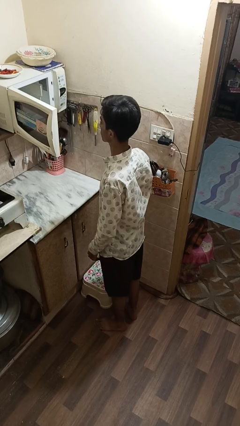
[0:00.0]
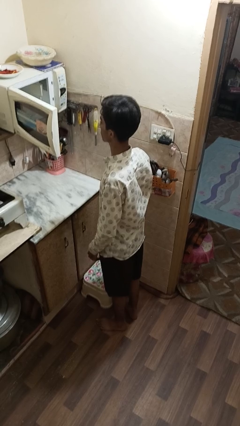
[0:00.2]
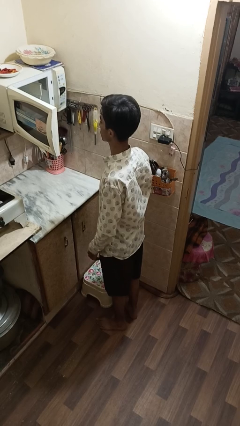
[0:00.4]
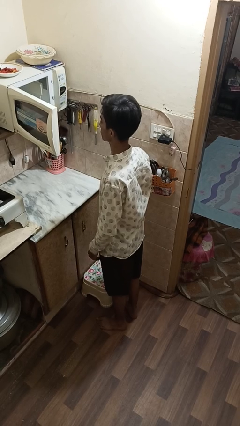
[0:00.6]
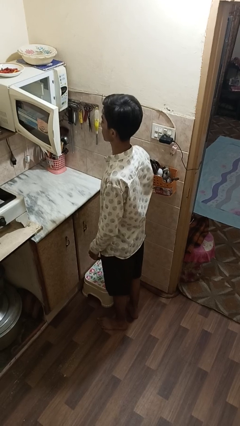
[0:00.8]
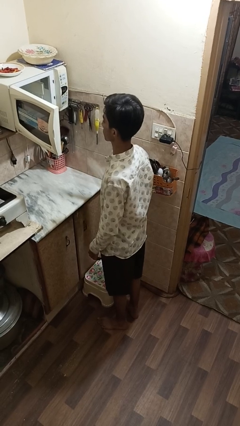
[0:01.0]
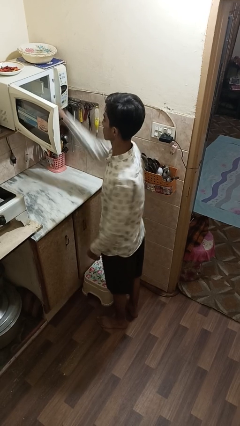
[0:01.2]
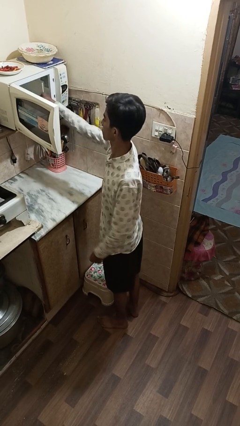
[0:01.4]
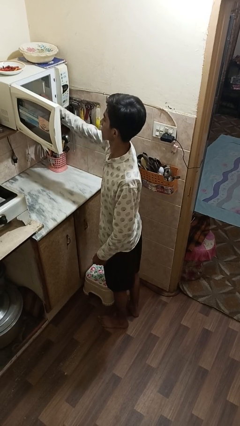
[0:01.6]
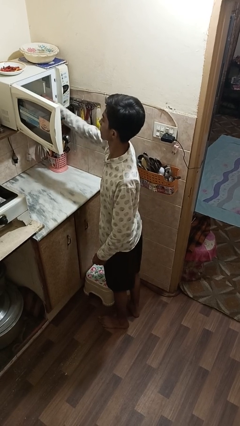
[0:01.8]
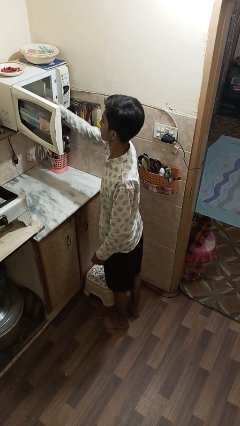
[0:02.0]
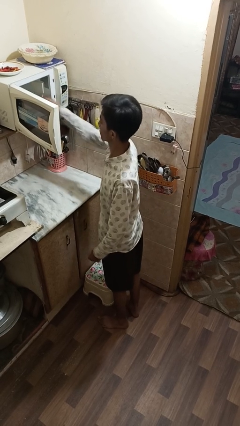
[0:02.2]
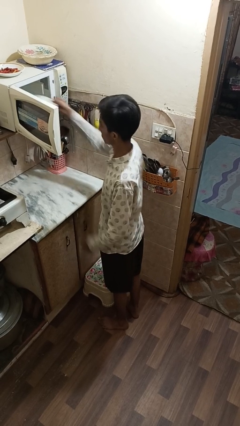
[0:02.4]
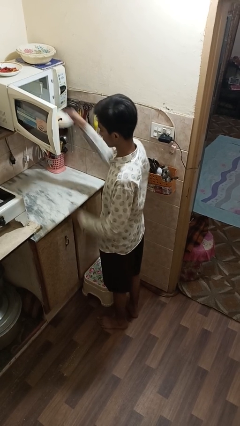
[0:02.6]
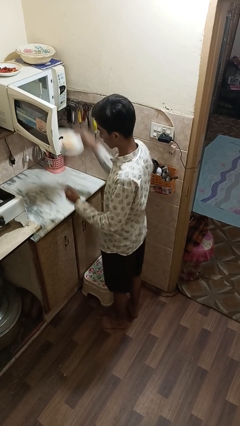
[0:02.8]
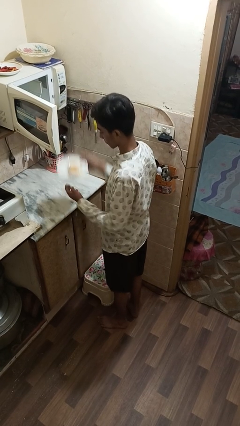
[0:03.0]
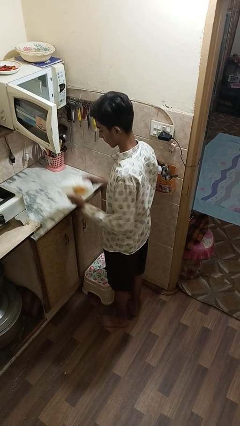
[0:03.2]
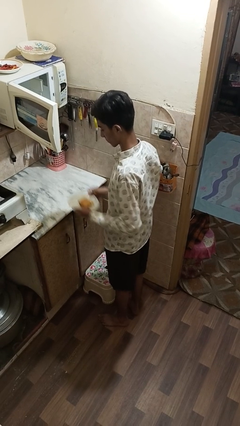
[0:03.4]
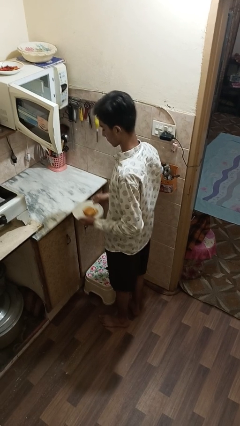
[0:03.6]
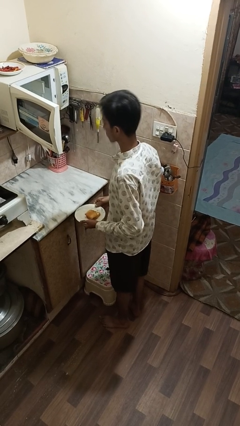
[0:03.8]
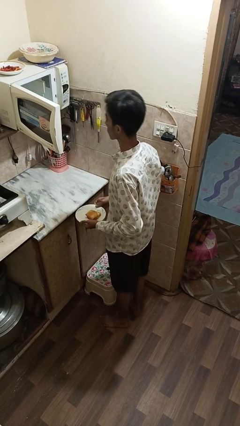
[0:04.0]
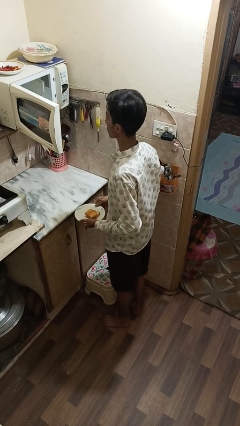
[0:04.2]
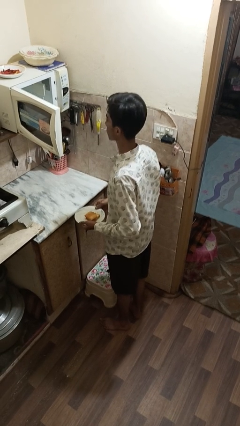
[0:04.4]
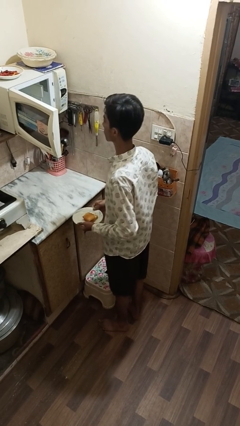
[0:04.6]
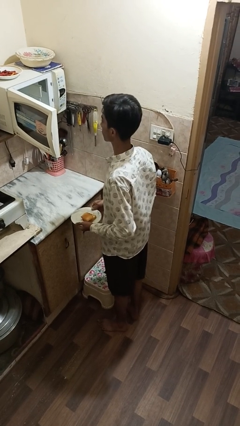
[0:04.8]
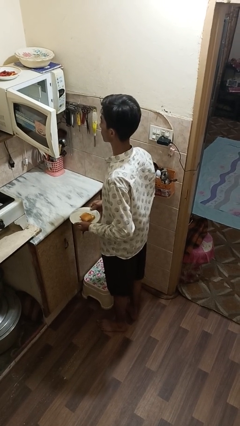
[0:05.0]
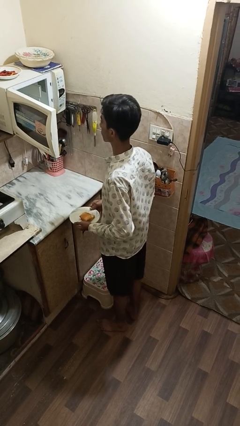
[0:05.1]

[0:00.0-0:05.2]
person takes object from microwave

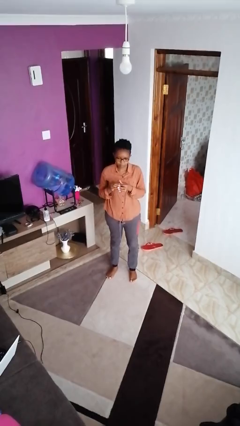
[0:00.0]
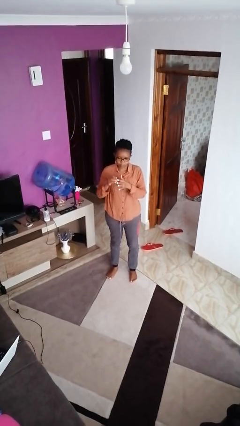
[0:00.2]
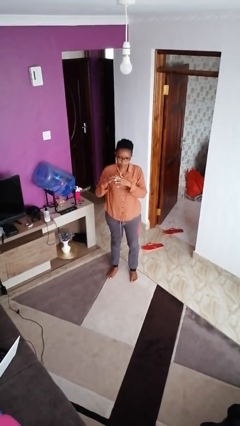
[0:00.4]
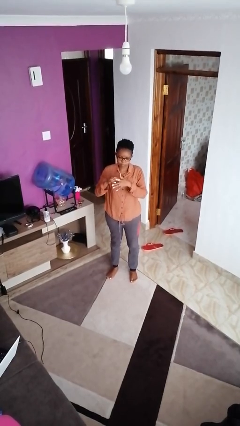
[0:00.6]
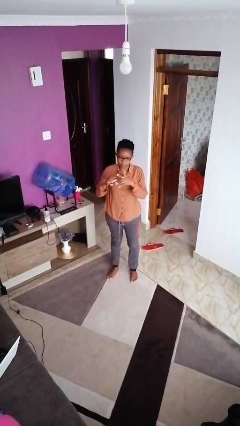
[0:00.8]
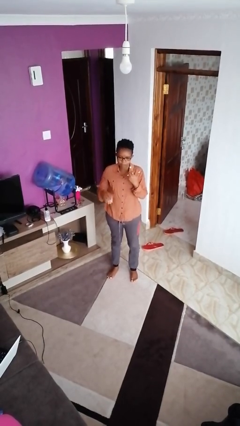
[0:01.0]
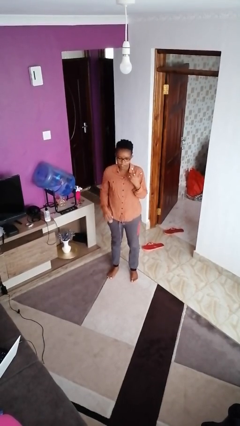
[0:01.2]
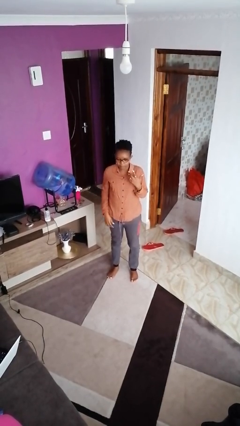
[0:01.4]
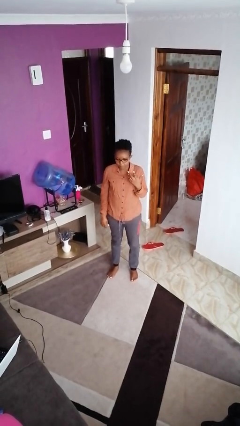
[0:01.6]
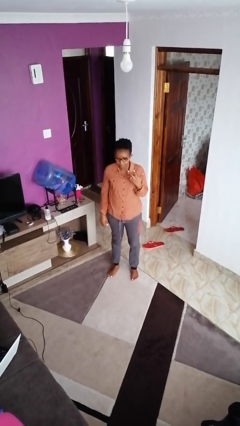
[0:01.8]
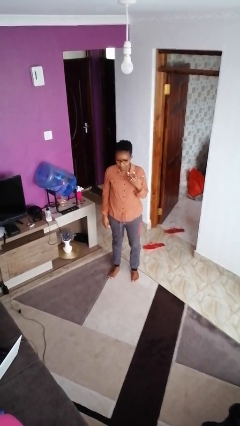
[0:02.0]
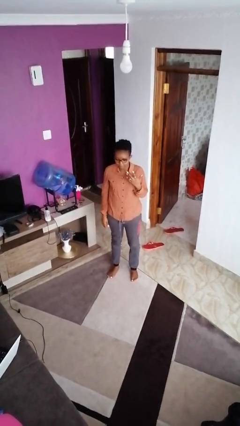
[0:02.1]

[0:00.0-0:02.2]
person puts on ring

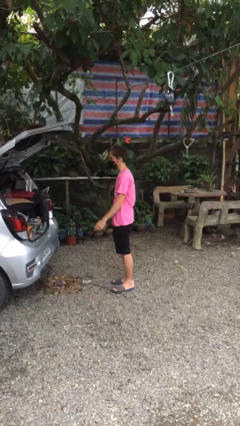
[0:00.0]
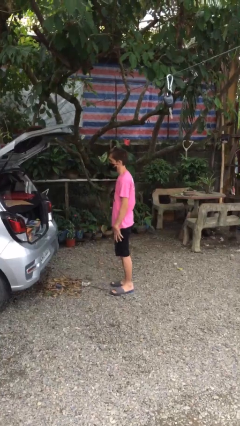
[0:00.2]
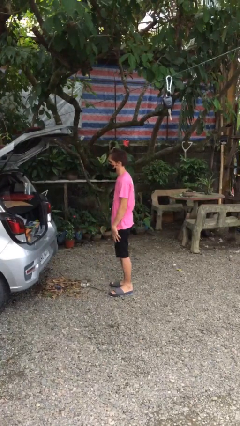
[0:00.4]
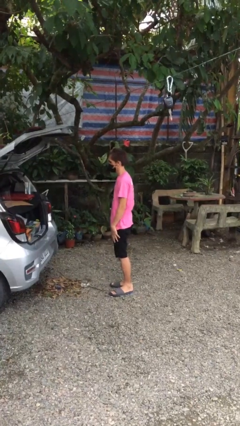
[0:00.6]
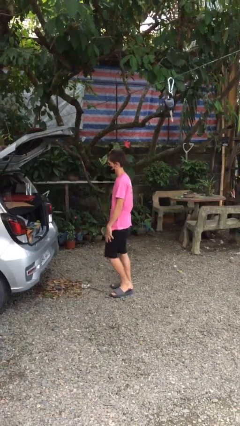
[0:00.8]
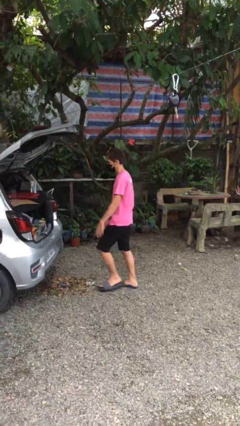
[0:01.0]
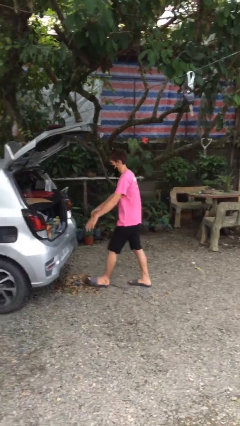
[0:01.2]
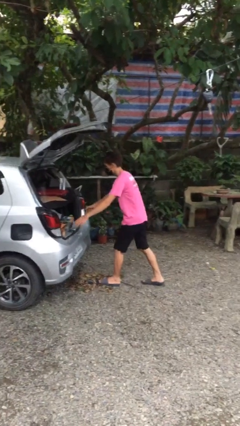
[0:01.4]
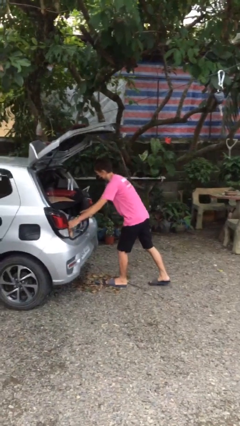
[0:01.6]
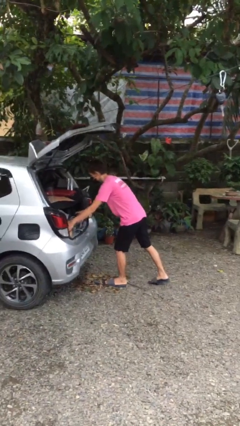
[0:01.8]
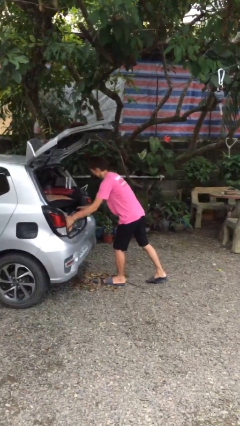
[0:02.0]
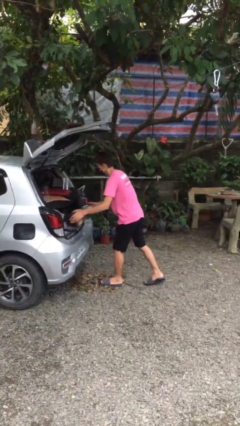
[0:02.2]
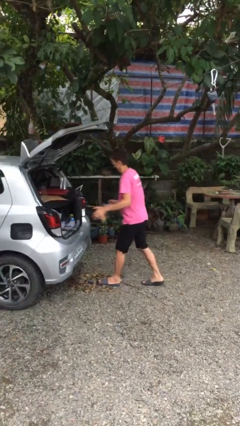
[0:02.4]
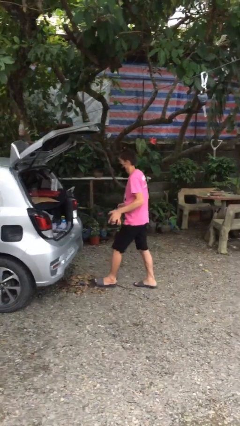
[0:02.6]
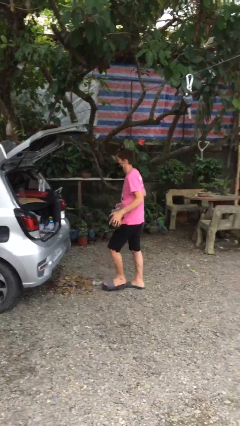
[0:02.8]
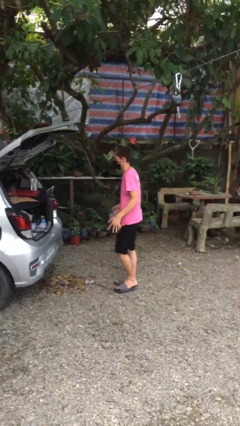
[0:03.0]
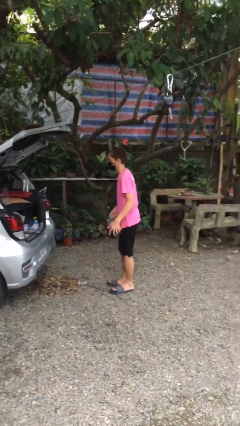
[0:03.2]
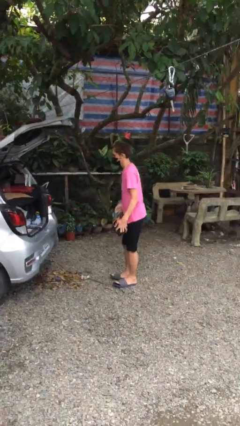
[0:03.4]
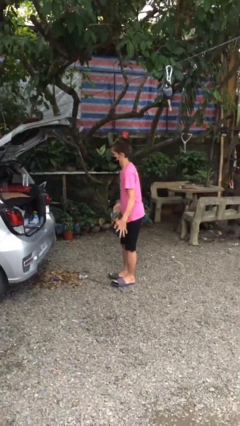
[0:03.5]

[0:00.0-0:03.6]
person unloads car

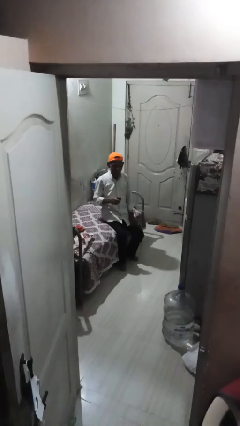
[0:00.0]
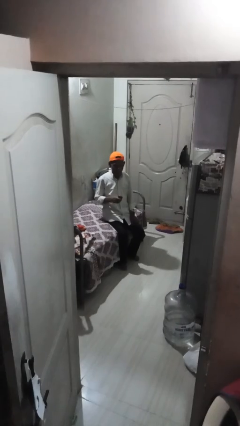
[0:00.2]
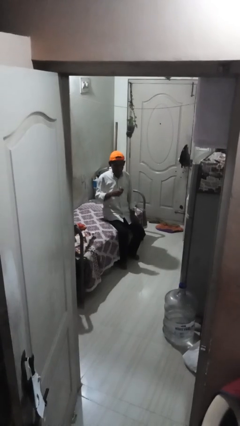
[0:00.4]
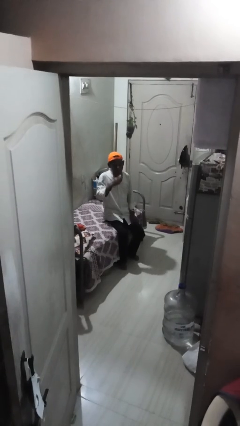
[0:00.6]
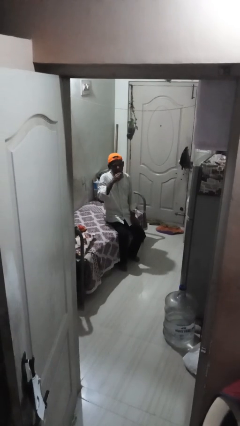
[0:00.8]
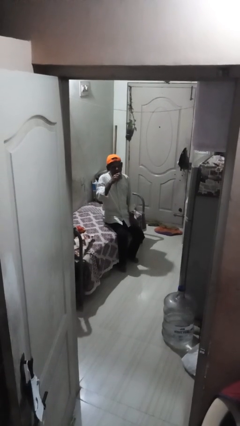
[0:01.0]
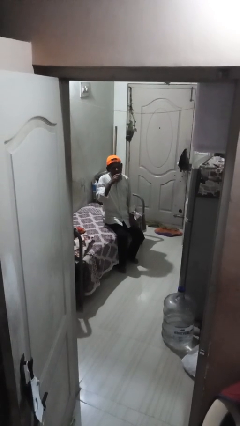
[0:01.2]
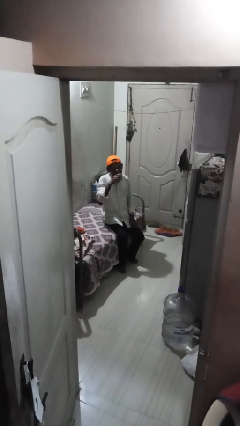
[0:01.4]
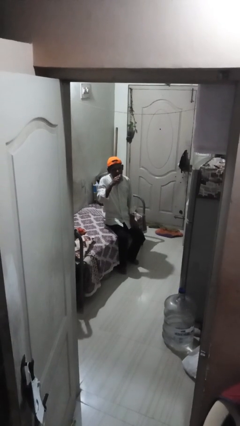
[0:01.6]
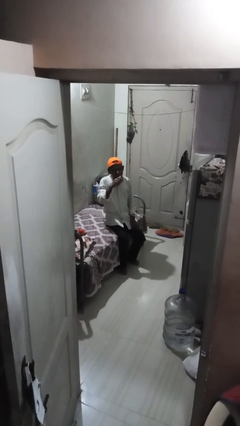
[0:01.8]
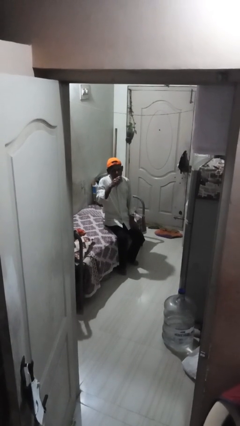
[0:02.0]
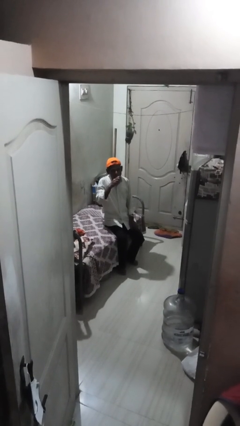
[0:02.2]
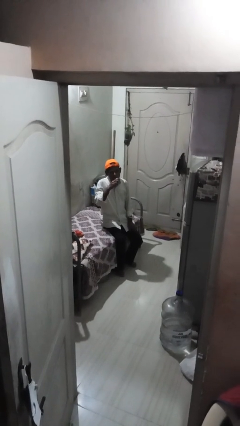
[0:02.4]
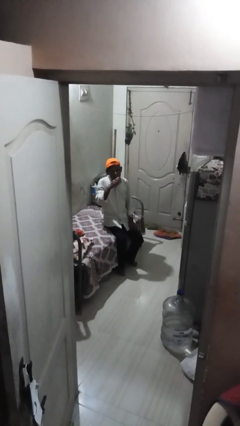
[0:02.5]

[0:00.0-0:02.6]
person eats apple

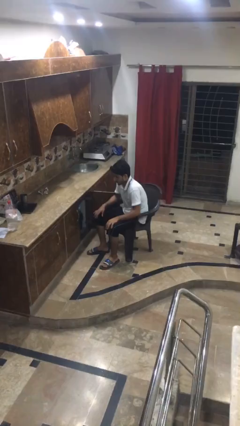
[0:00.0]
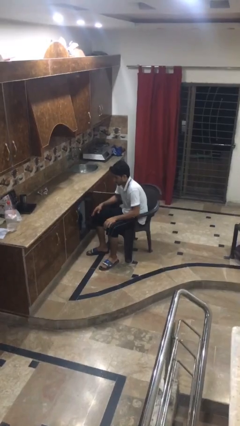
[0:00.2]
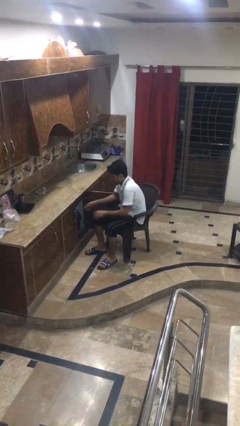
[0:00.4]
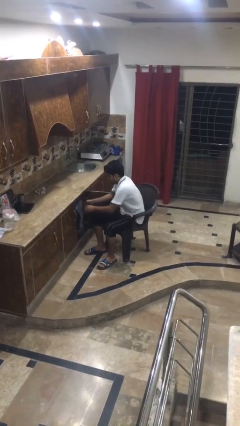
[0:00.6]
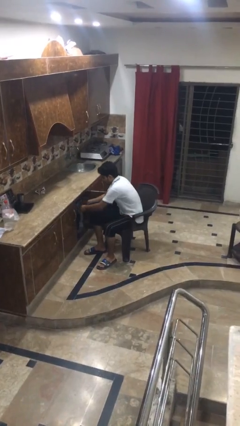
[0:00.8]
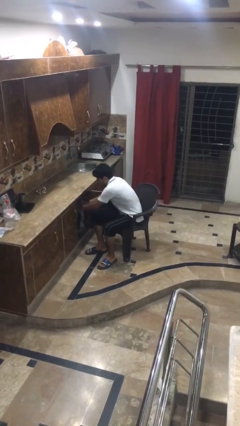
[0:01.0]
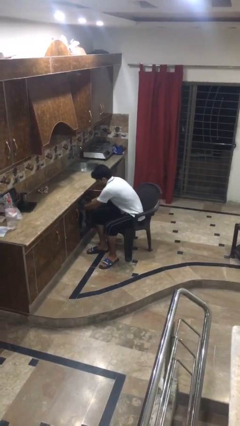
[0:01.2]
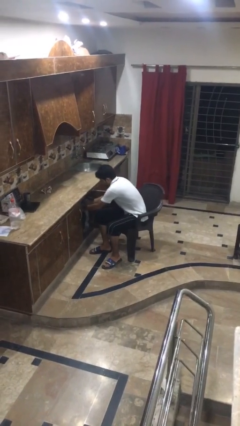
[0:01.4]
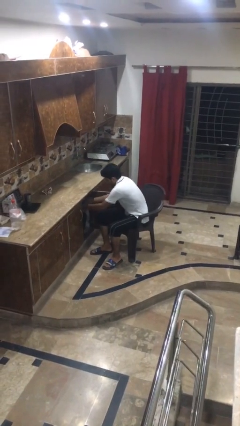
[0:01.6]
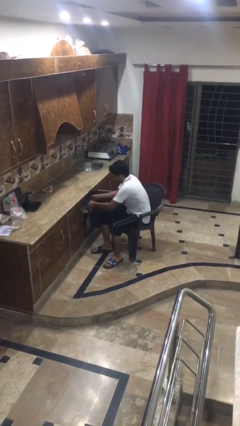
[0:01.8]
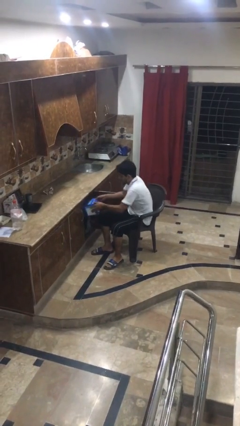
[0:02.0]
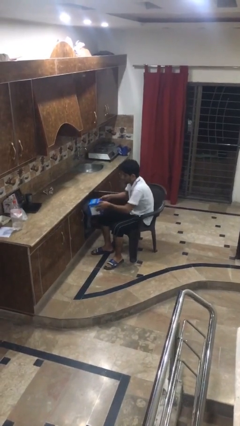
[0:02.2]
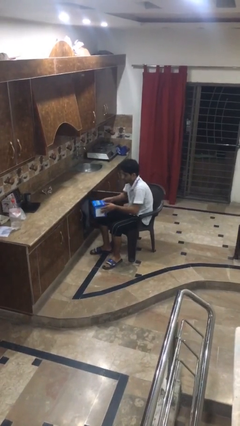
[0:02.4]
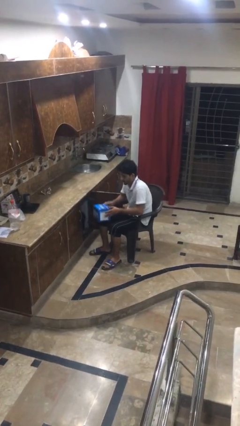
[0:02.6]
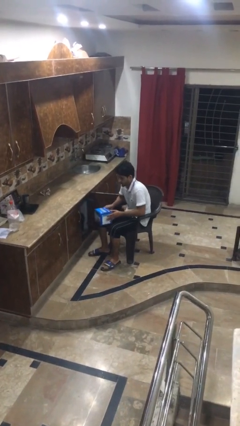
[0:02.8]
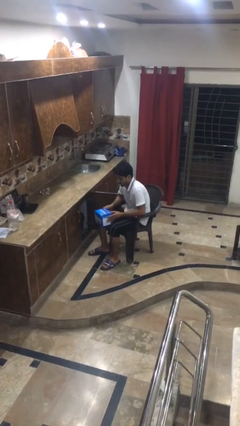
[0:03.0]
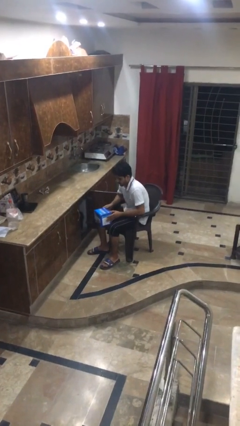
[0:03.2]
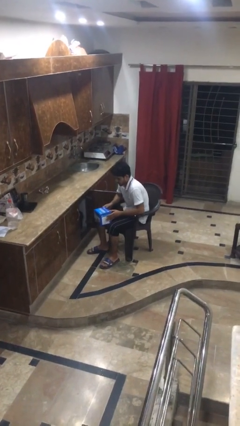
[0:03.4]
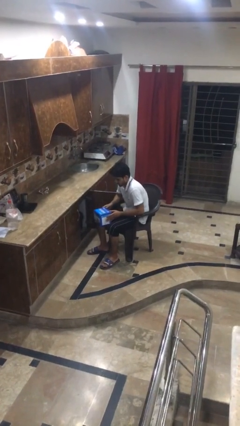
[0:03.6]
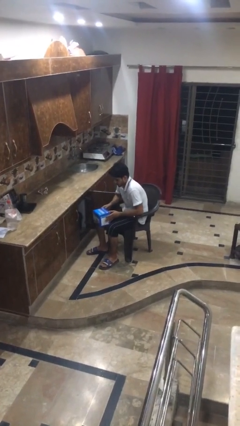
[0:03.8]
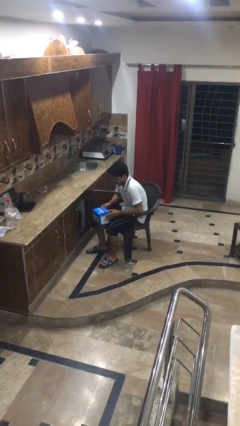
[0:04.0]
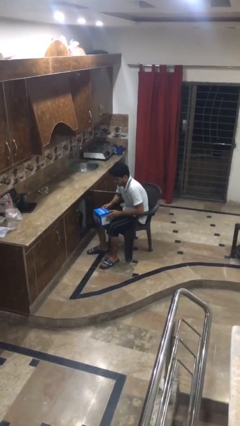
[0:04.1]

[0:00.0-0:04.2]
person picks up object from cabinet
